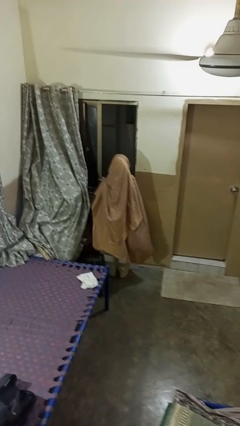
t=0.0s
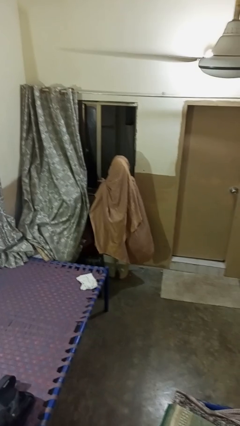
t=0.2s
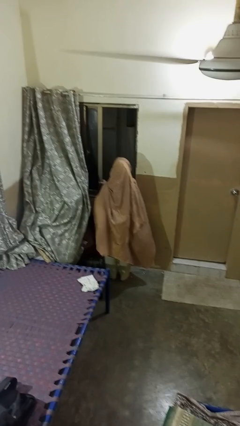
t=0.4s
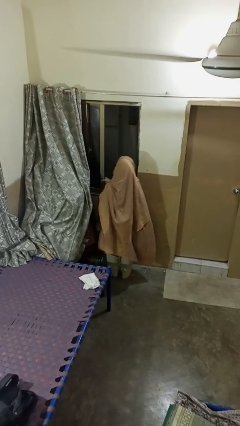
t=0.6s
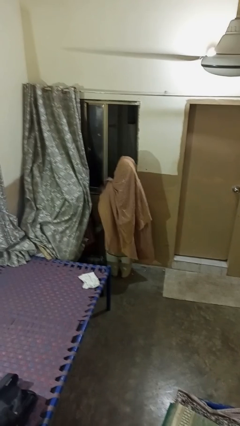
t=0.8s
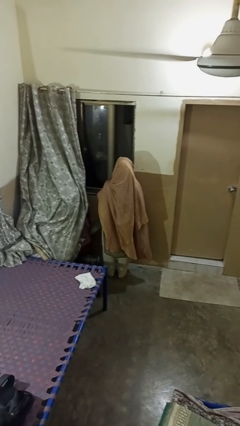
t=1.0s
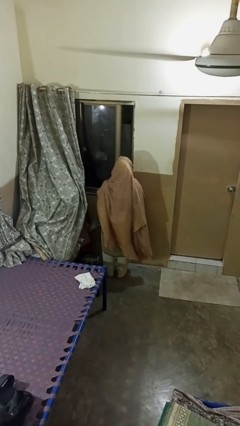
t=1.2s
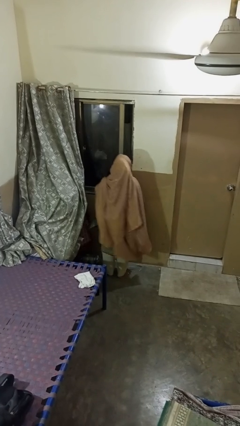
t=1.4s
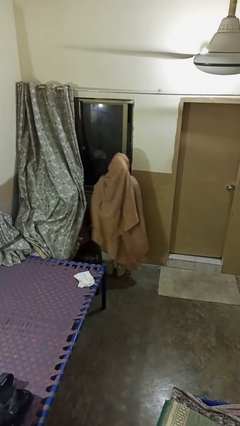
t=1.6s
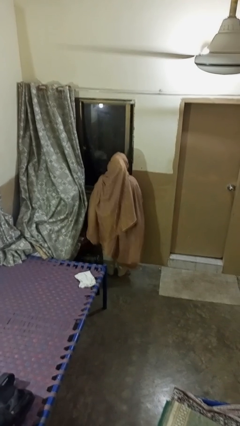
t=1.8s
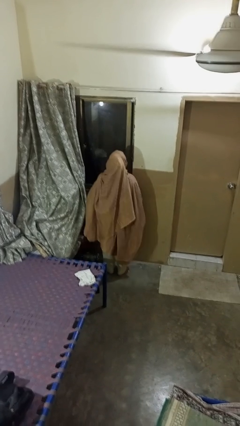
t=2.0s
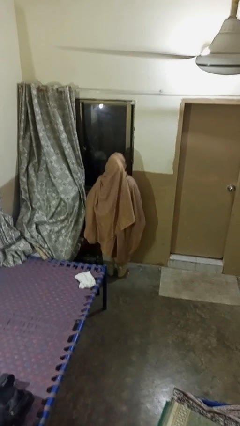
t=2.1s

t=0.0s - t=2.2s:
person closes home window

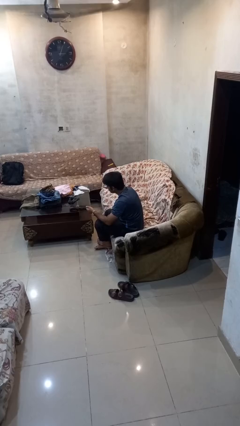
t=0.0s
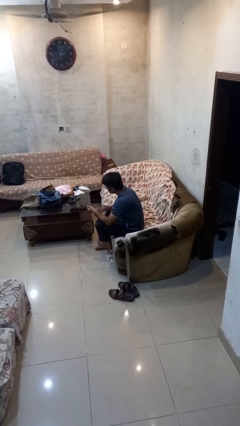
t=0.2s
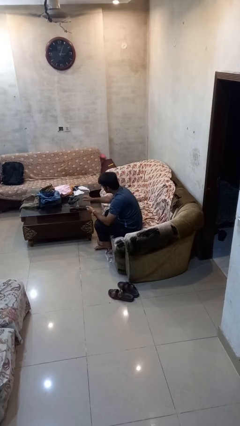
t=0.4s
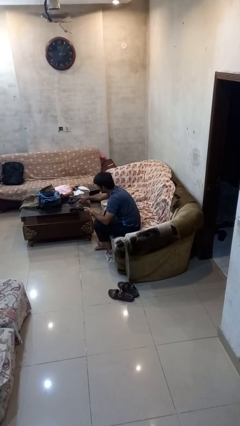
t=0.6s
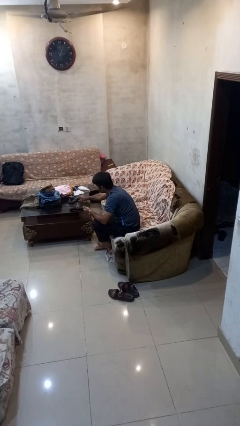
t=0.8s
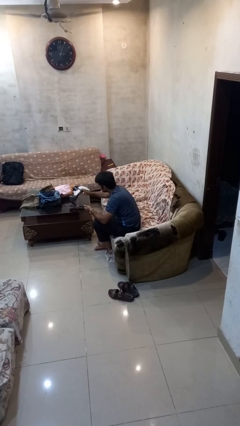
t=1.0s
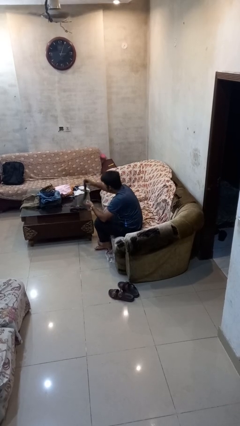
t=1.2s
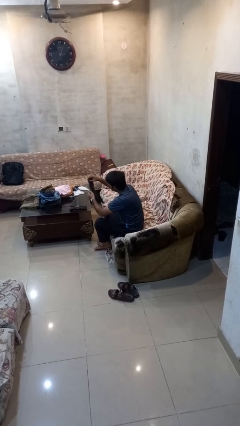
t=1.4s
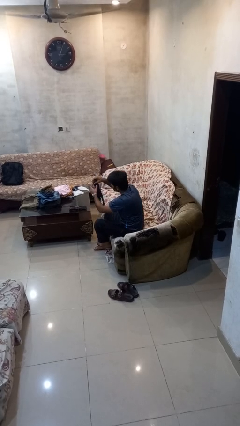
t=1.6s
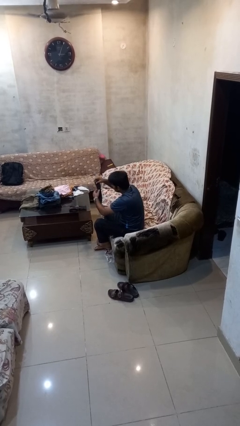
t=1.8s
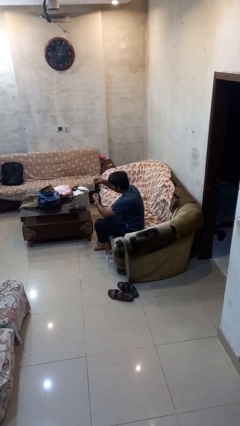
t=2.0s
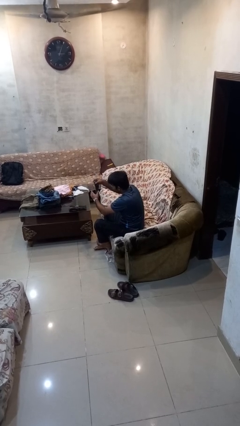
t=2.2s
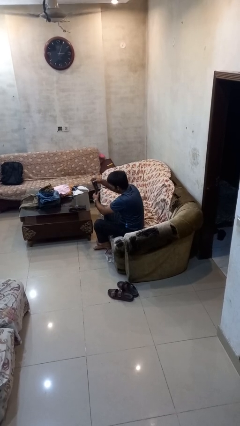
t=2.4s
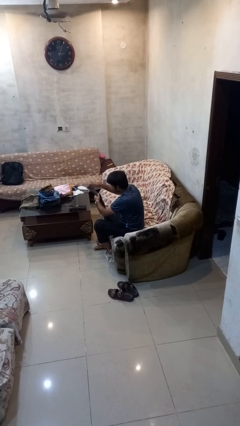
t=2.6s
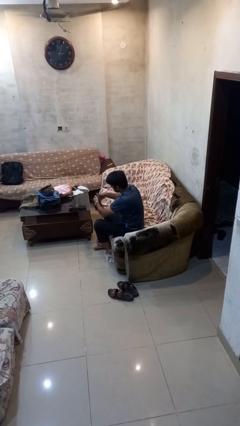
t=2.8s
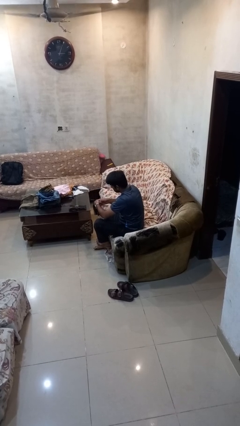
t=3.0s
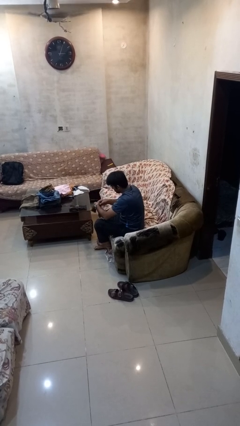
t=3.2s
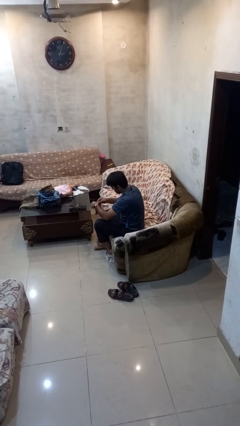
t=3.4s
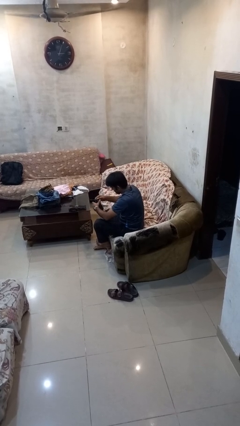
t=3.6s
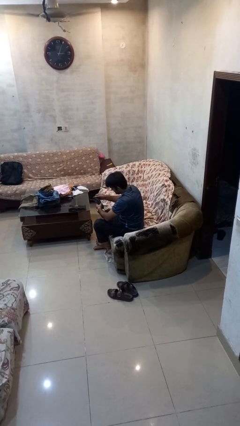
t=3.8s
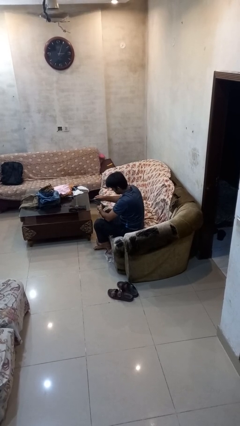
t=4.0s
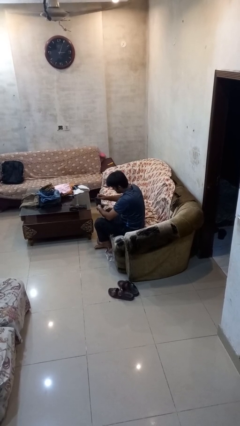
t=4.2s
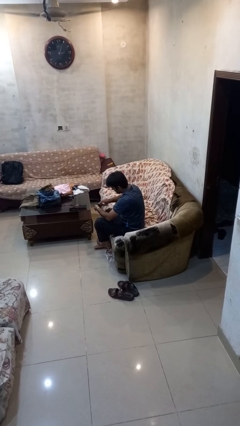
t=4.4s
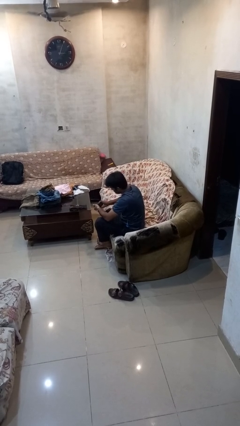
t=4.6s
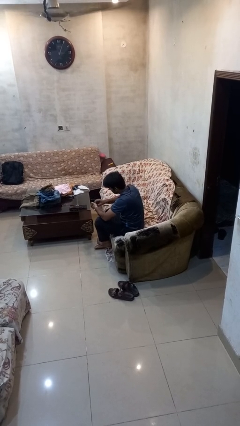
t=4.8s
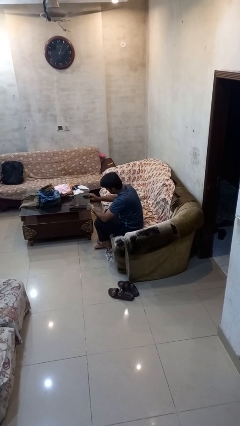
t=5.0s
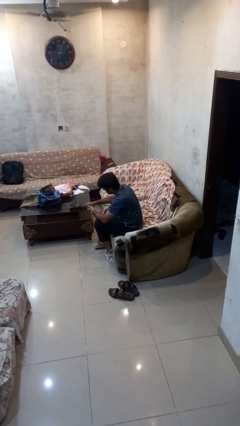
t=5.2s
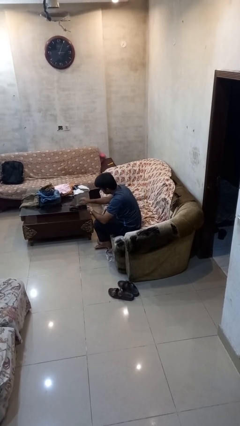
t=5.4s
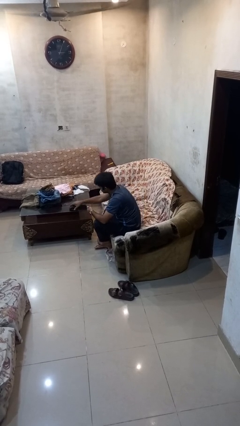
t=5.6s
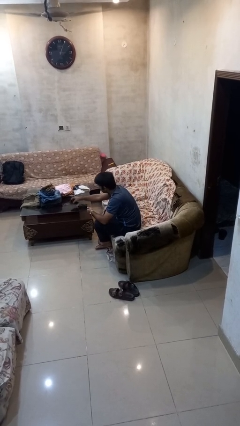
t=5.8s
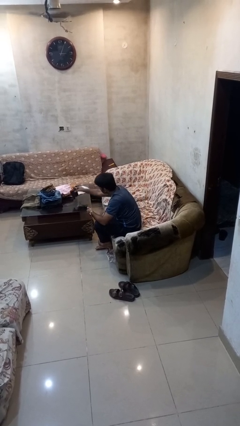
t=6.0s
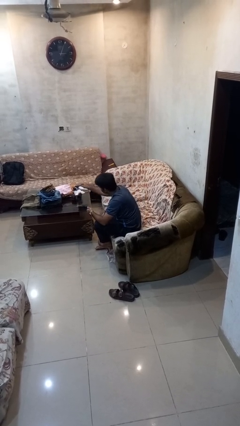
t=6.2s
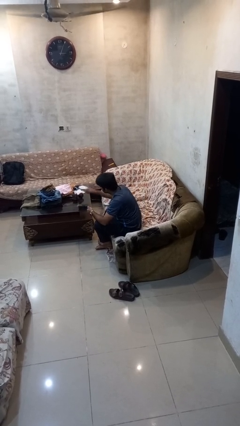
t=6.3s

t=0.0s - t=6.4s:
person folds socks

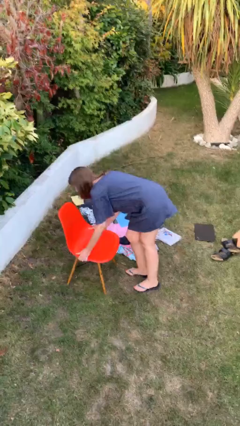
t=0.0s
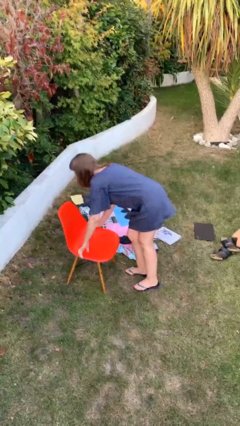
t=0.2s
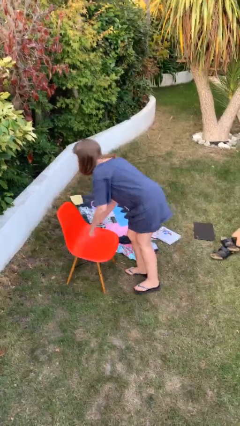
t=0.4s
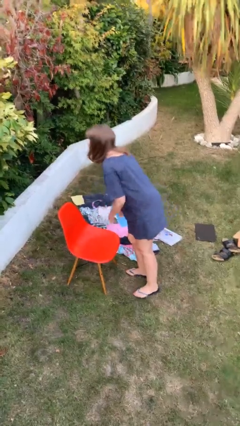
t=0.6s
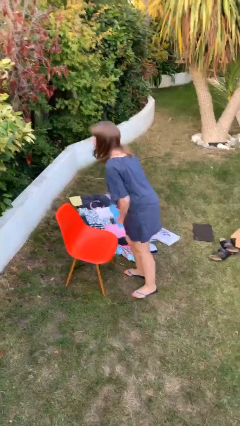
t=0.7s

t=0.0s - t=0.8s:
person puts down object on floor

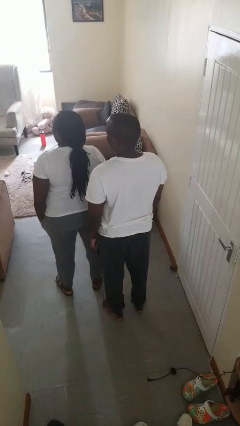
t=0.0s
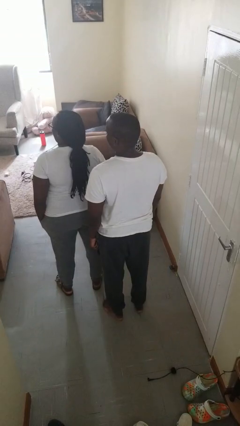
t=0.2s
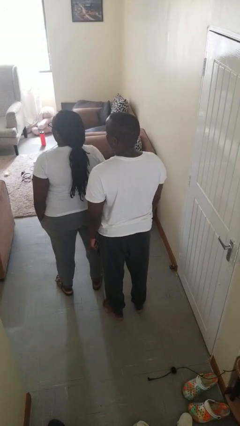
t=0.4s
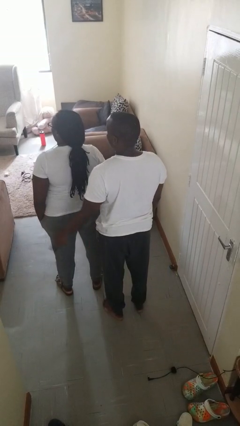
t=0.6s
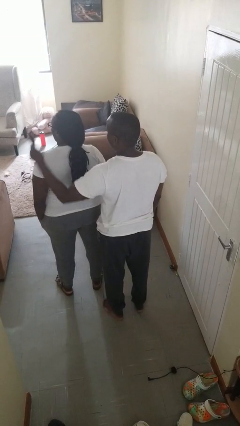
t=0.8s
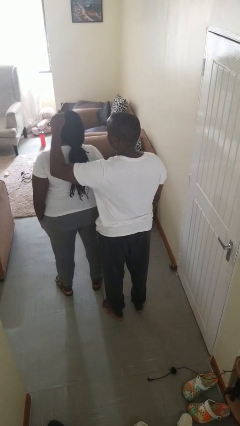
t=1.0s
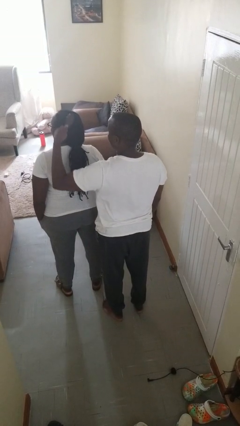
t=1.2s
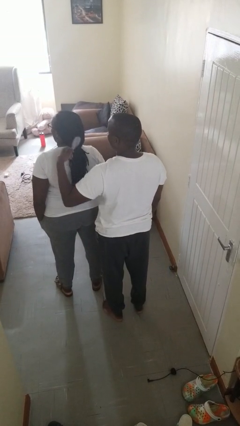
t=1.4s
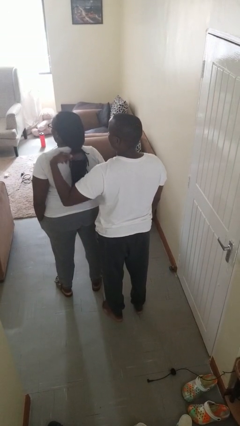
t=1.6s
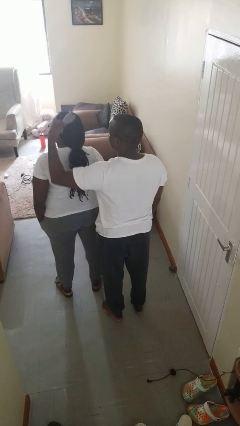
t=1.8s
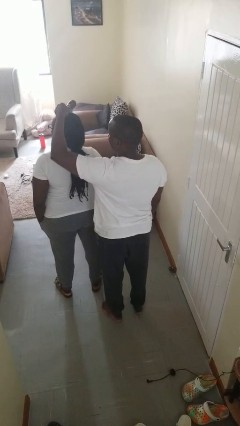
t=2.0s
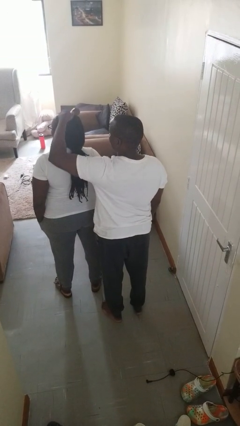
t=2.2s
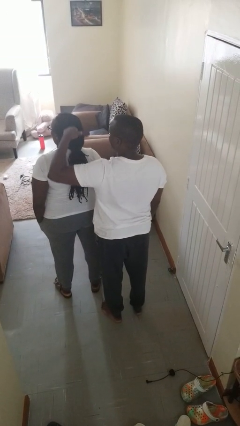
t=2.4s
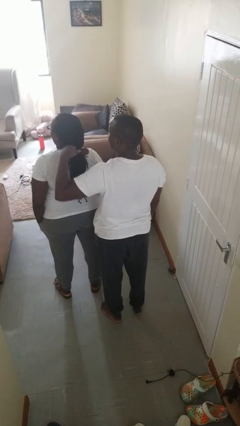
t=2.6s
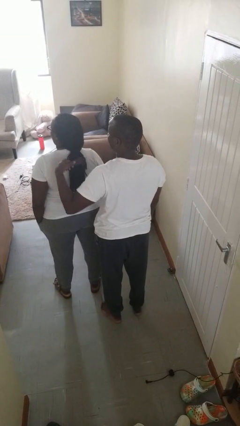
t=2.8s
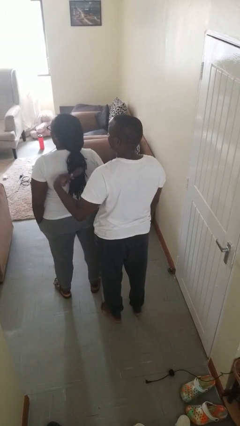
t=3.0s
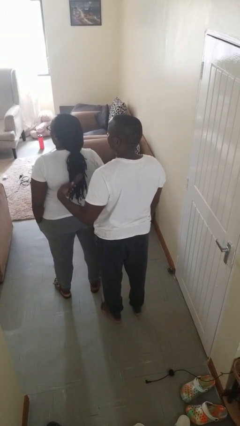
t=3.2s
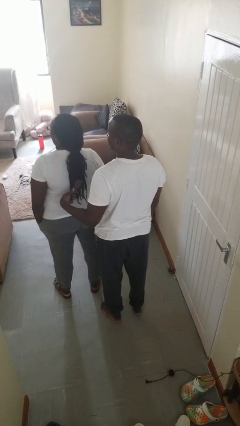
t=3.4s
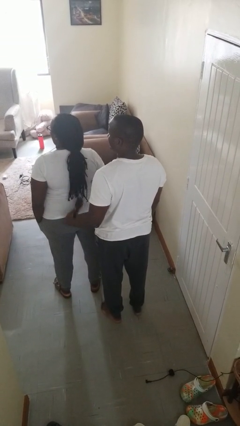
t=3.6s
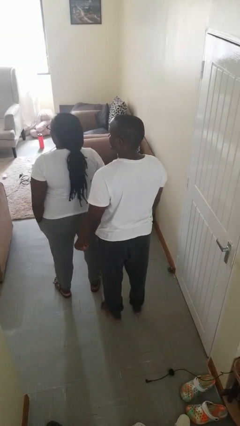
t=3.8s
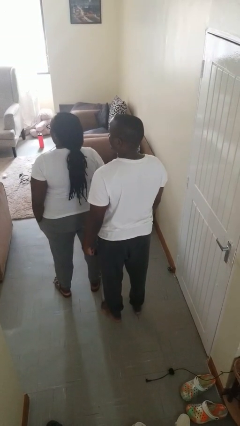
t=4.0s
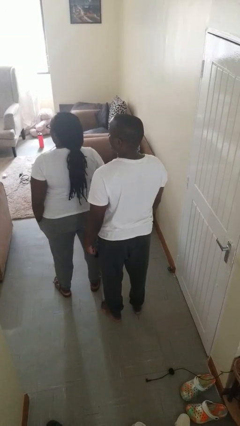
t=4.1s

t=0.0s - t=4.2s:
person brushes hair of person

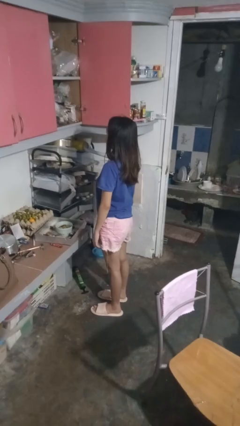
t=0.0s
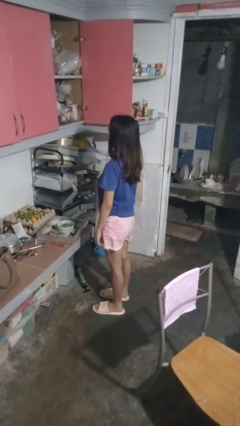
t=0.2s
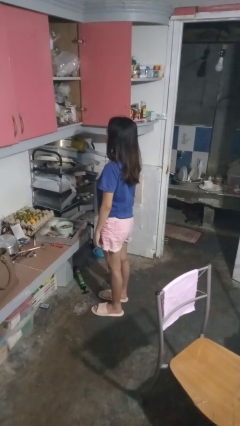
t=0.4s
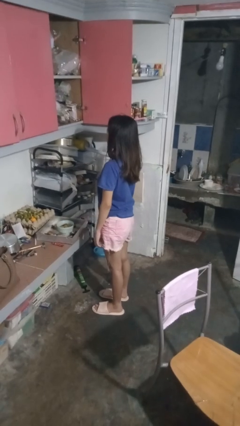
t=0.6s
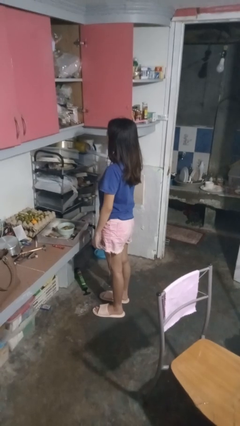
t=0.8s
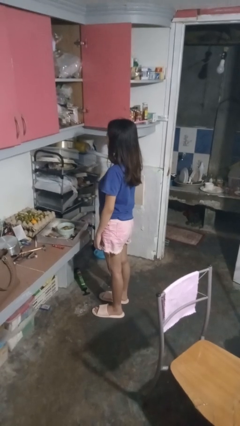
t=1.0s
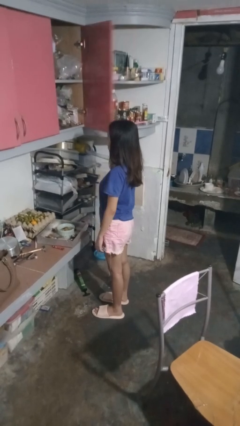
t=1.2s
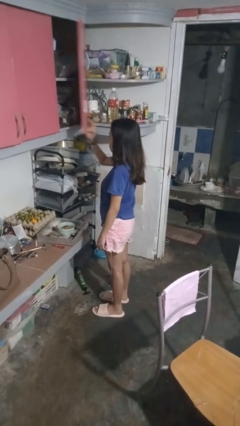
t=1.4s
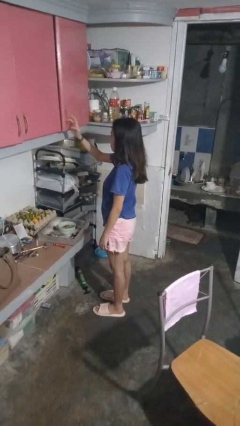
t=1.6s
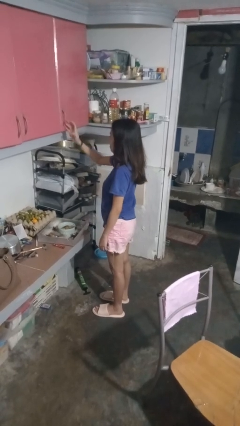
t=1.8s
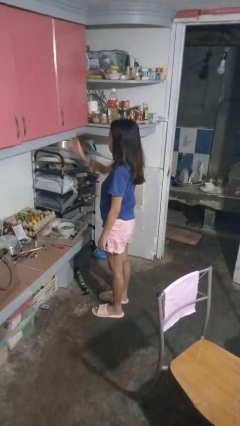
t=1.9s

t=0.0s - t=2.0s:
person closes cabinet

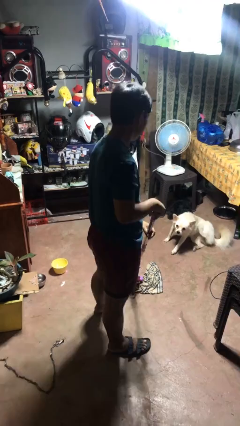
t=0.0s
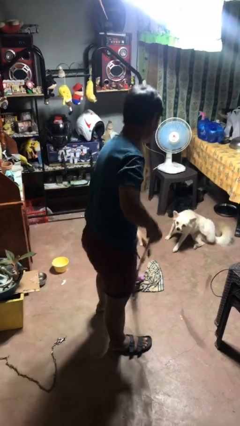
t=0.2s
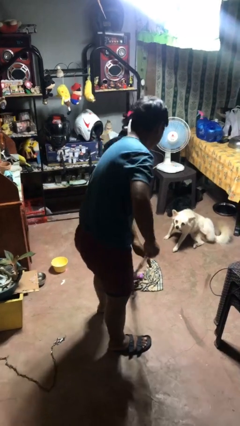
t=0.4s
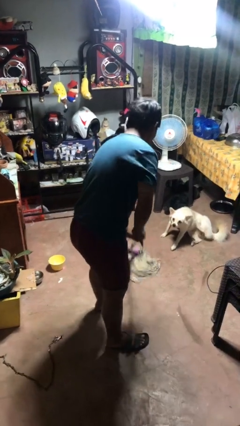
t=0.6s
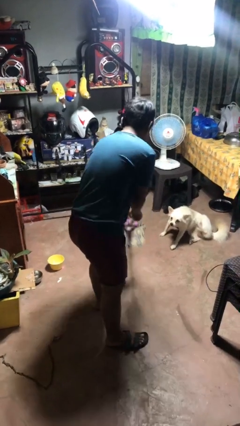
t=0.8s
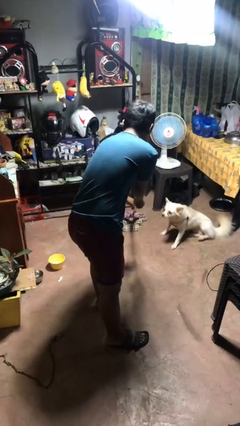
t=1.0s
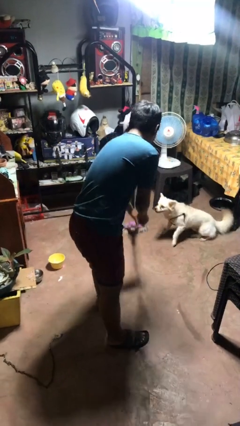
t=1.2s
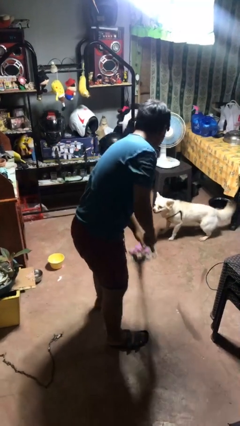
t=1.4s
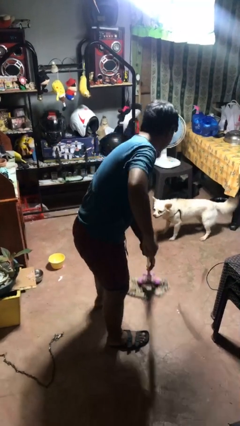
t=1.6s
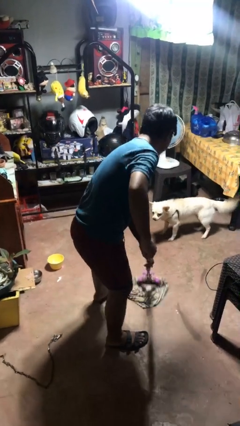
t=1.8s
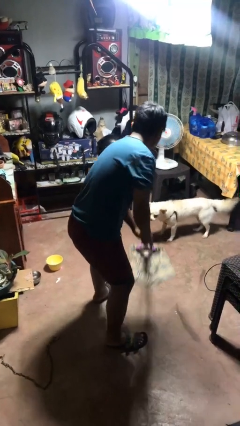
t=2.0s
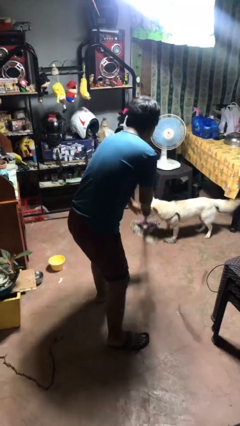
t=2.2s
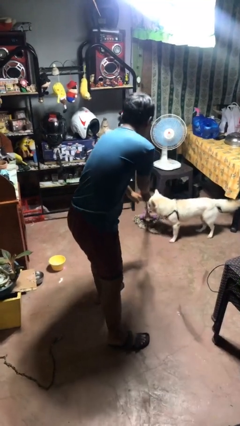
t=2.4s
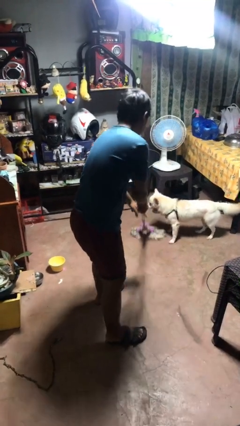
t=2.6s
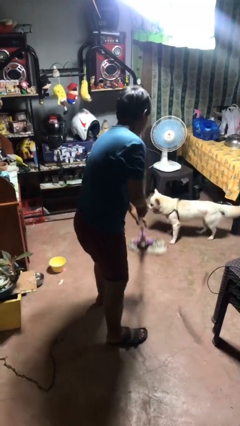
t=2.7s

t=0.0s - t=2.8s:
person mops
